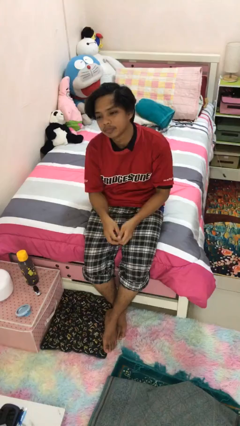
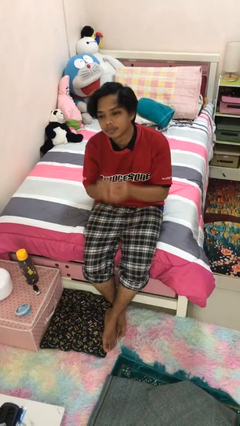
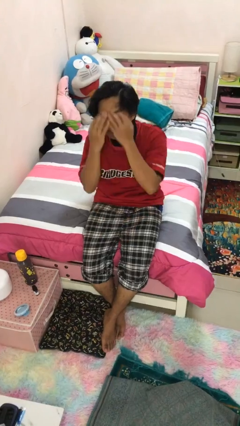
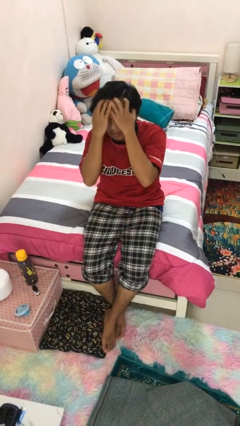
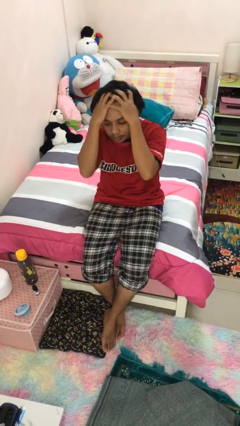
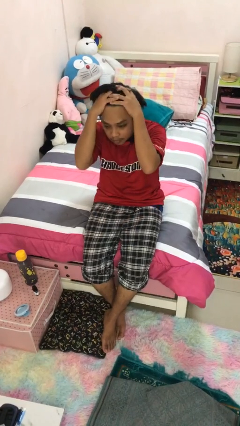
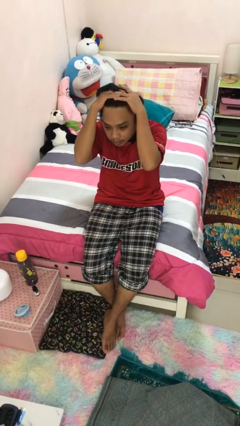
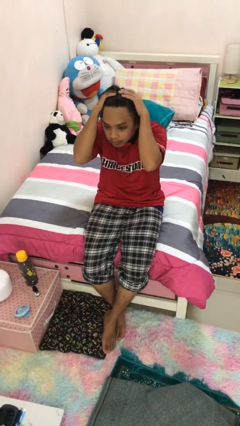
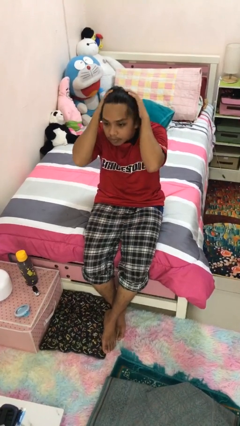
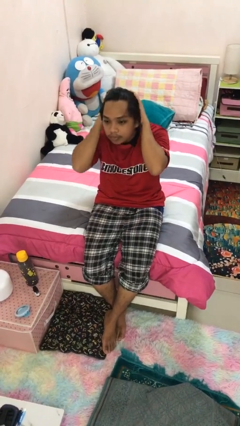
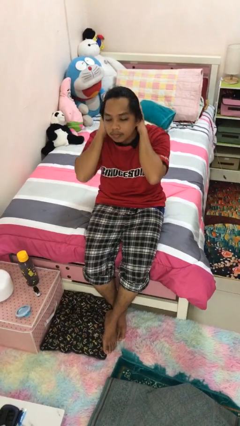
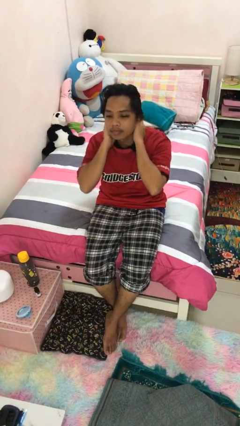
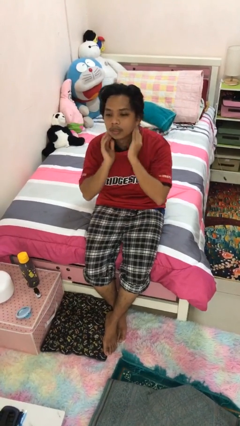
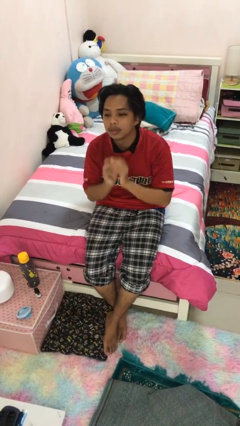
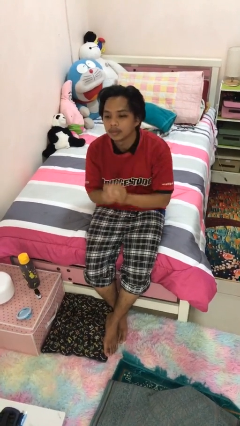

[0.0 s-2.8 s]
person strokes hair

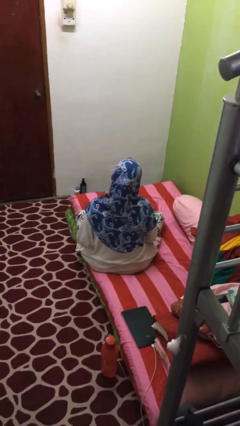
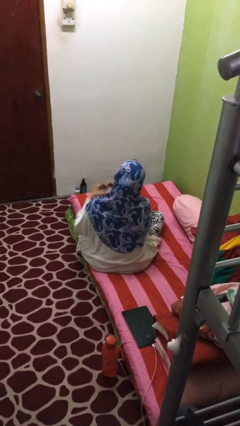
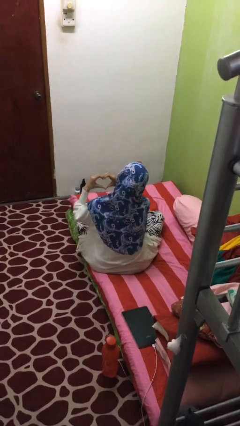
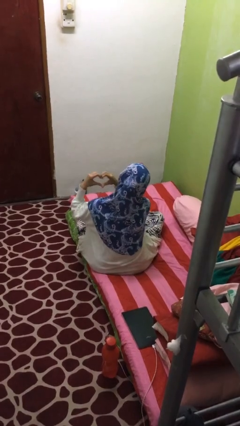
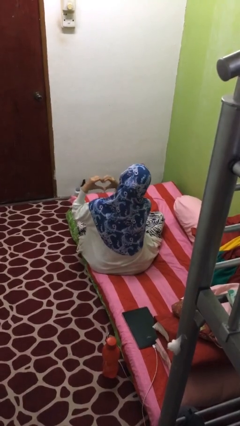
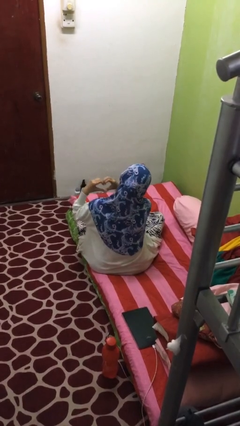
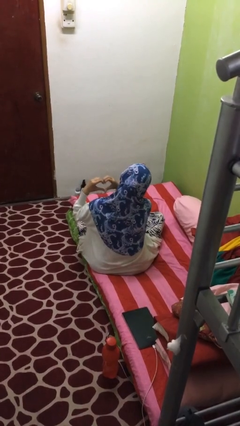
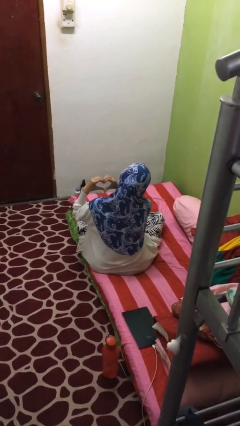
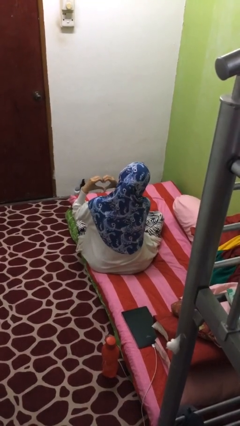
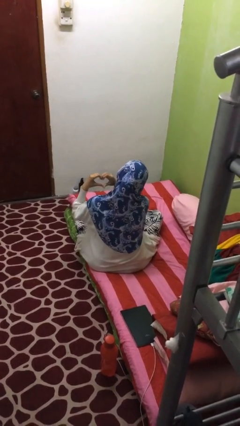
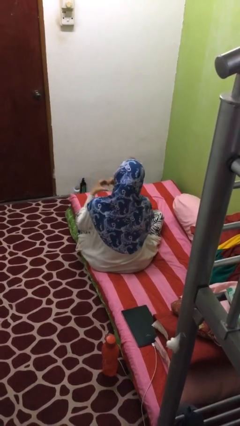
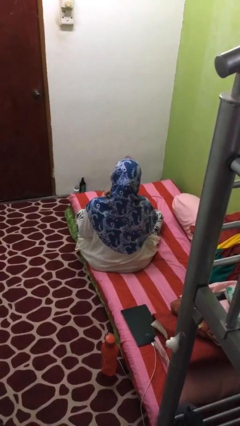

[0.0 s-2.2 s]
person gestures heart

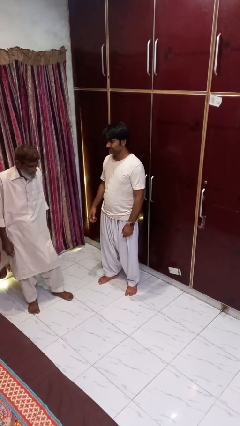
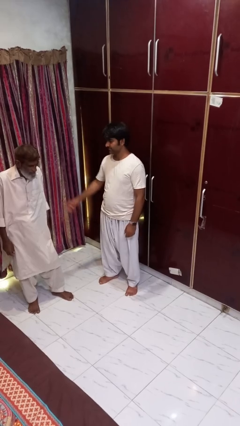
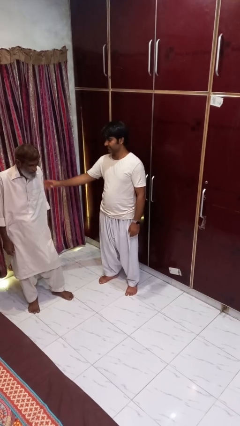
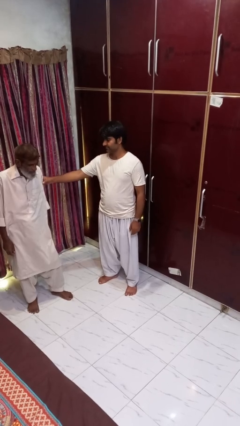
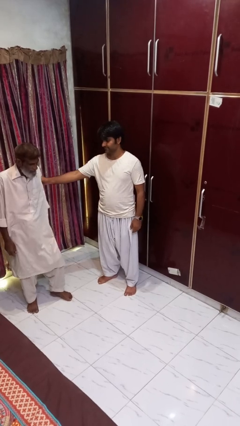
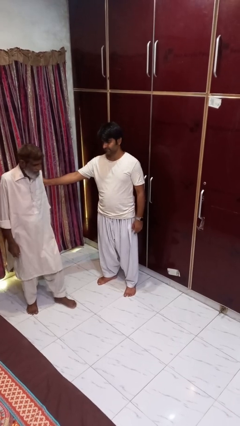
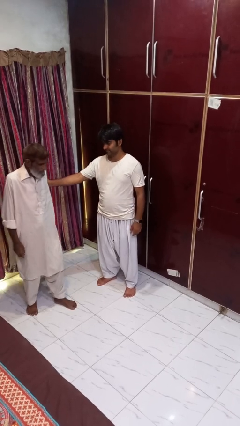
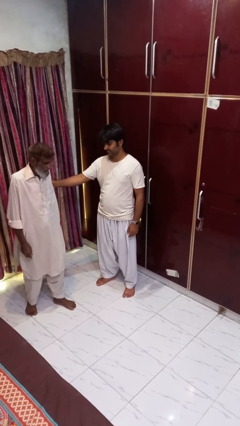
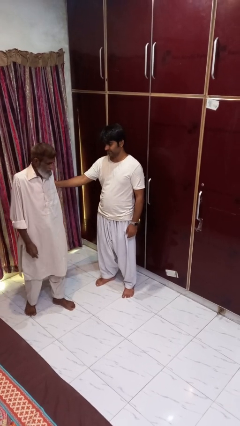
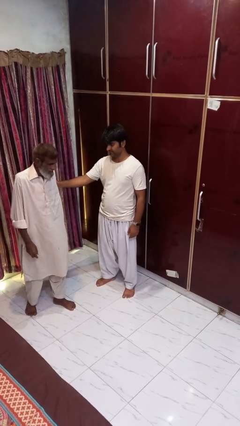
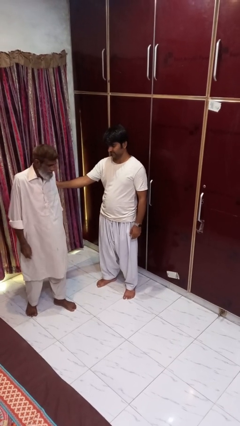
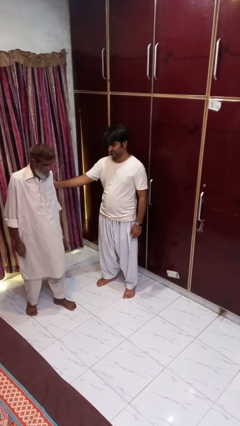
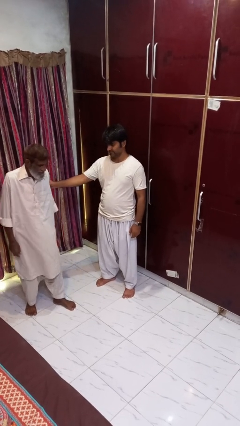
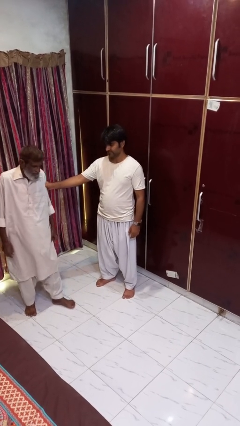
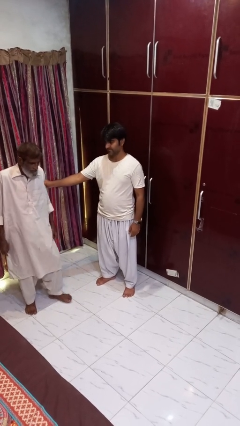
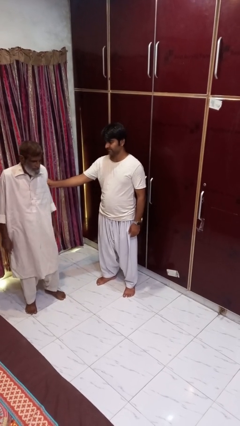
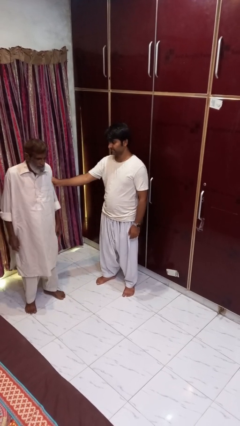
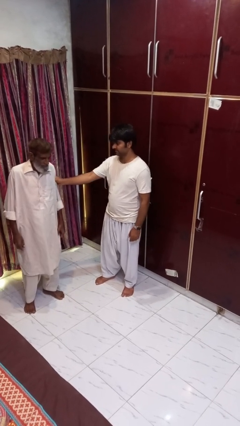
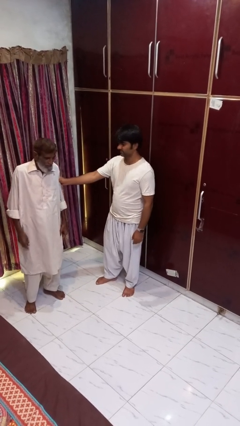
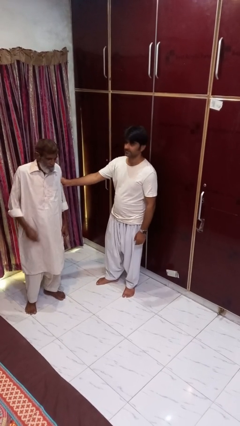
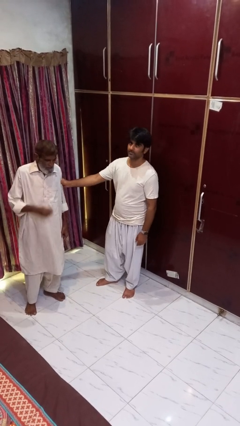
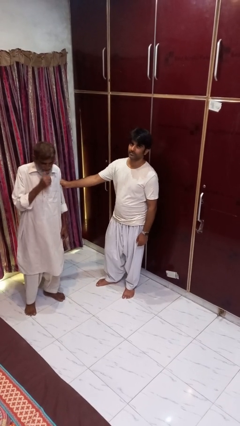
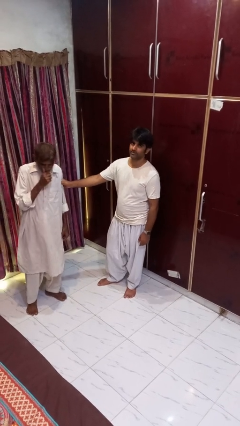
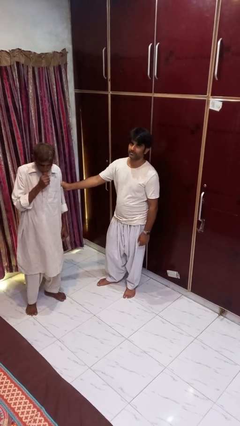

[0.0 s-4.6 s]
person grabs person by bicep

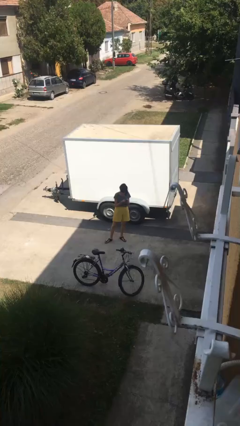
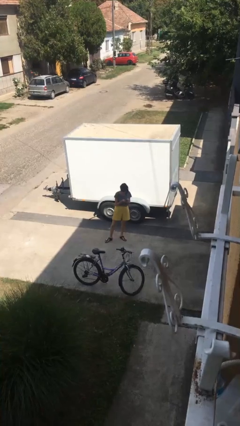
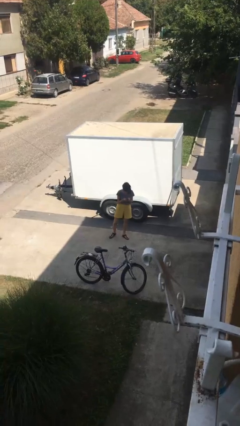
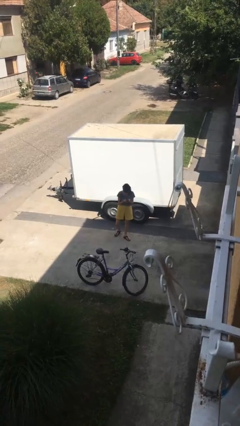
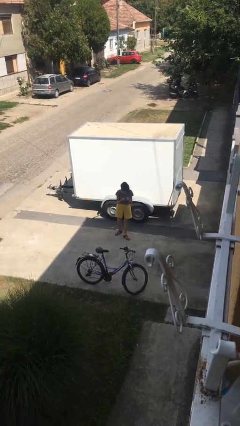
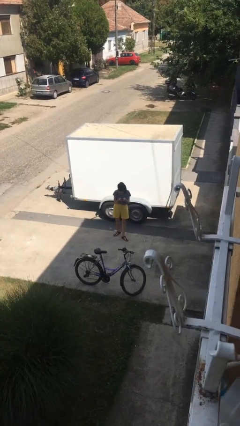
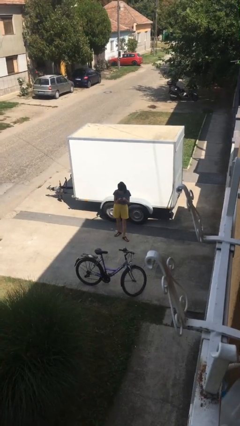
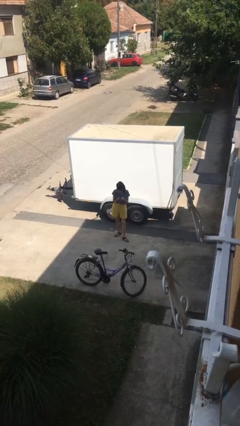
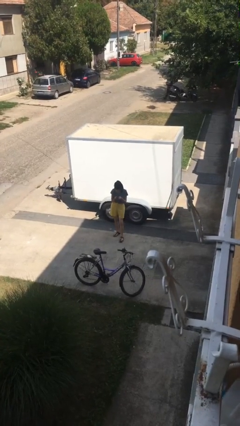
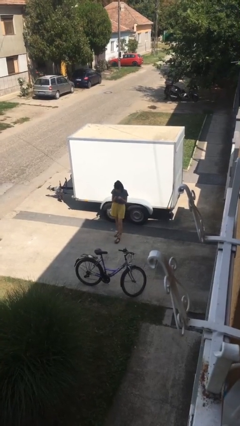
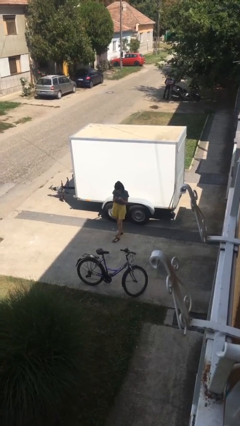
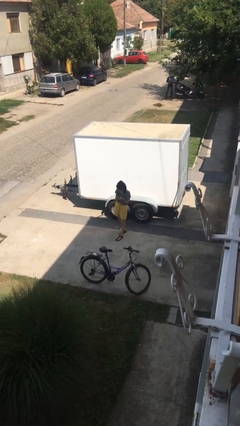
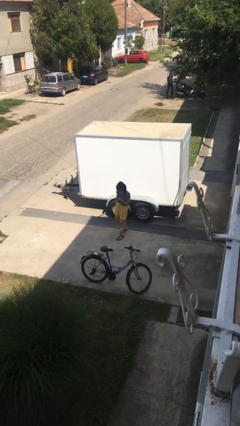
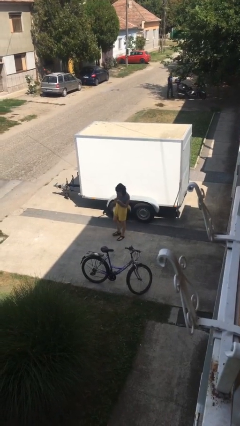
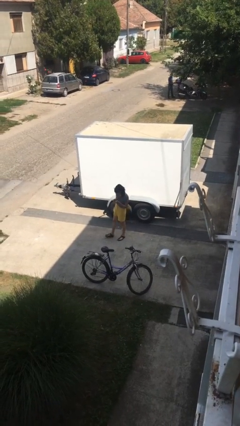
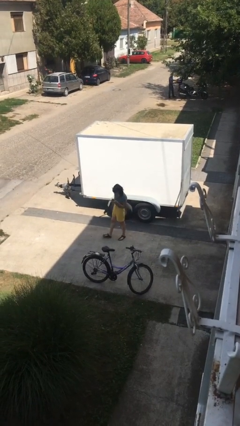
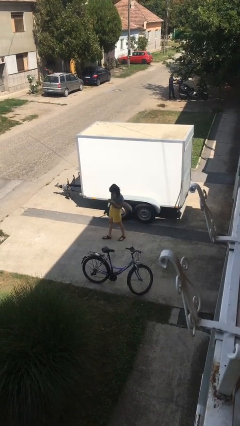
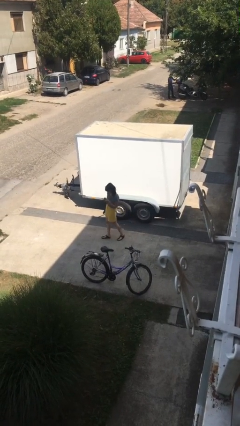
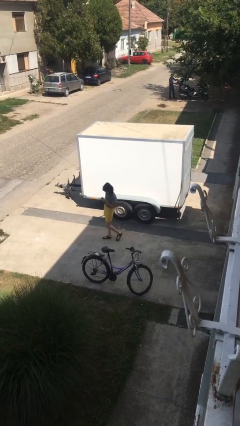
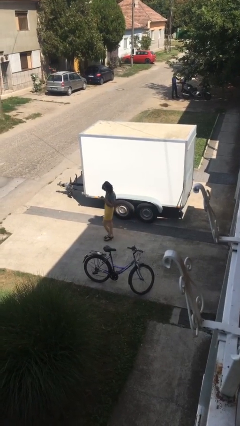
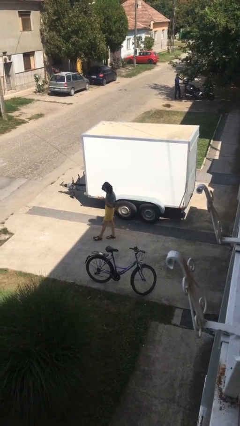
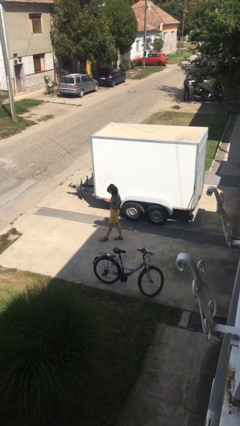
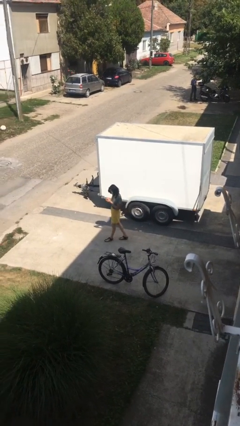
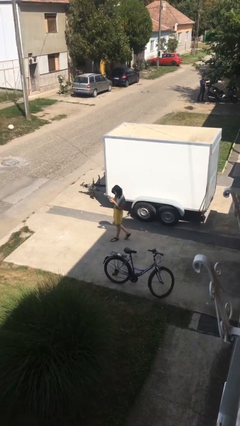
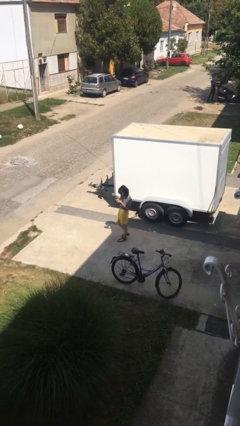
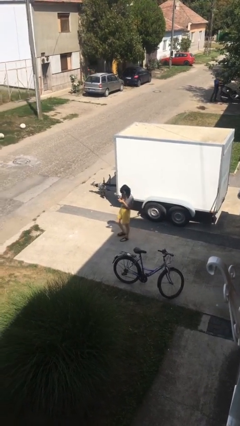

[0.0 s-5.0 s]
person texts on phone

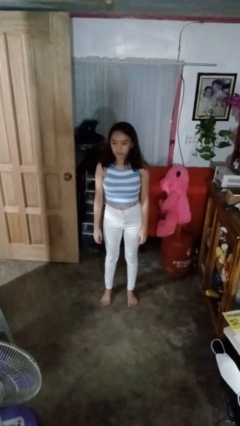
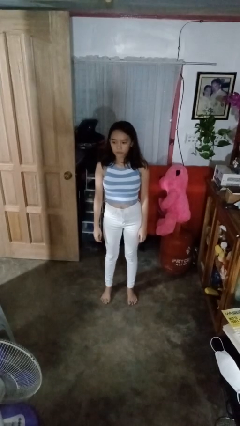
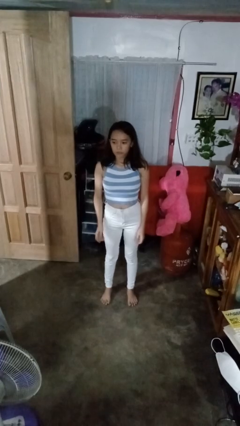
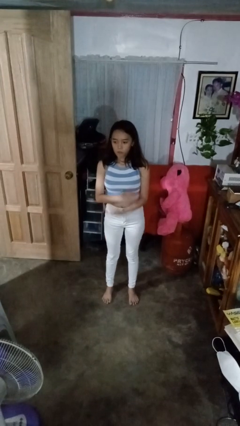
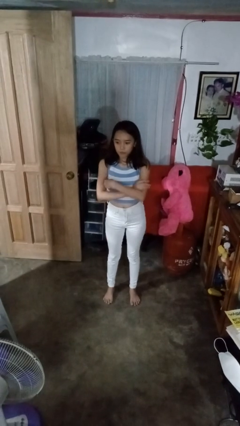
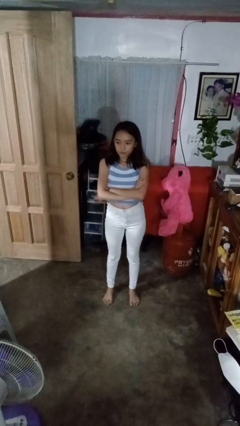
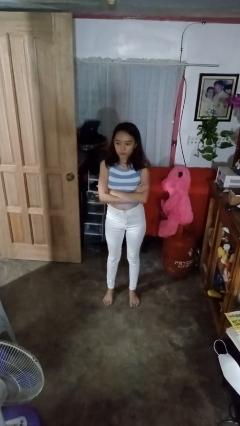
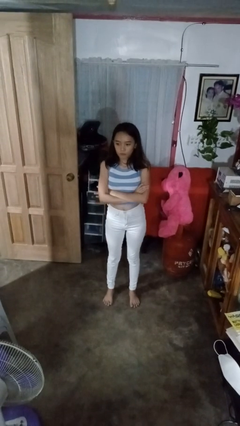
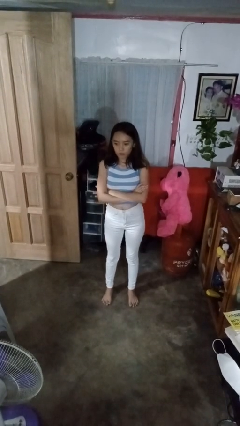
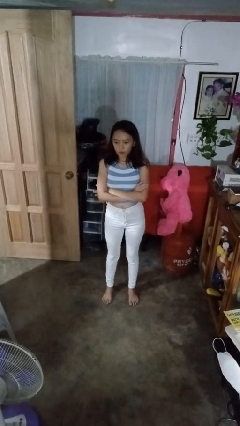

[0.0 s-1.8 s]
person crosses arms

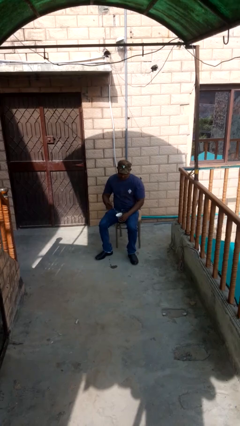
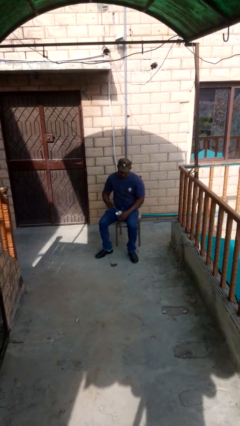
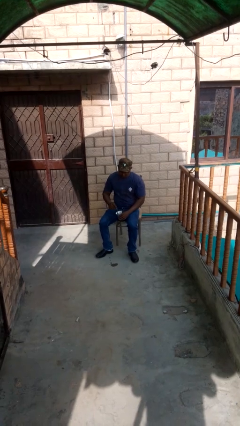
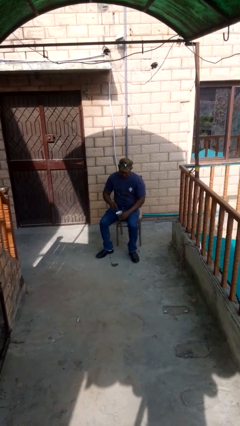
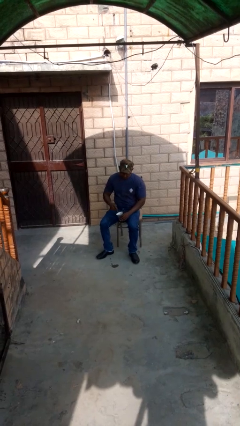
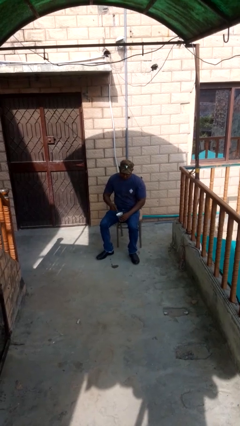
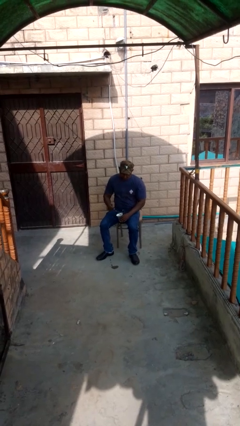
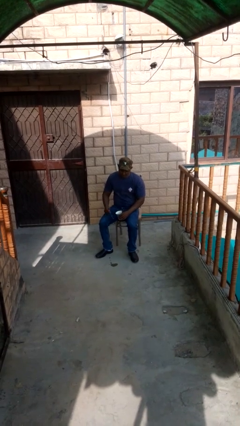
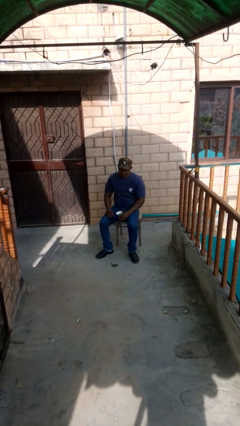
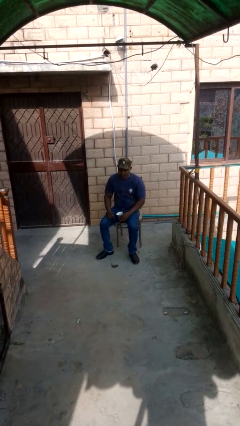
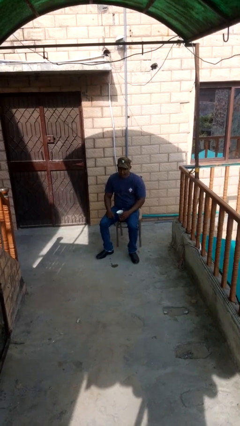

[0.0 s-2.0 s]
person stirs mug
